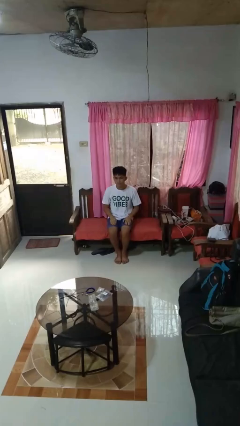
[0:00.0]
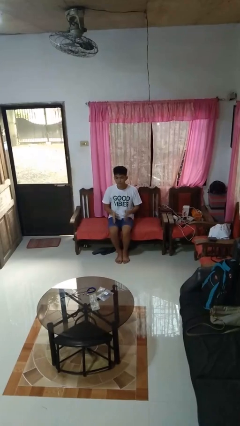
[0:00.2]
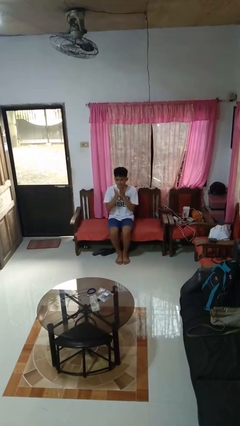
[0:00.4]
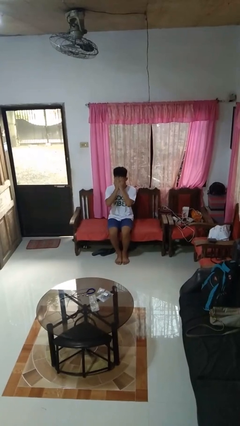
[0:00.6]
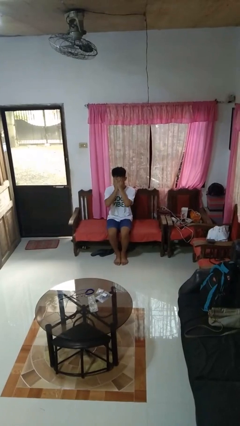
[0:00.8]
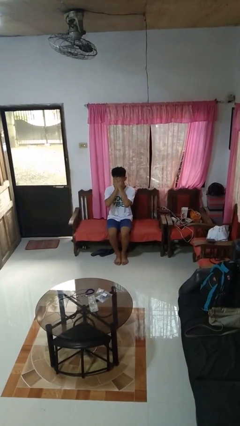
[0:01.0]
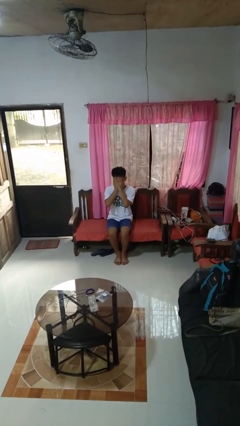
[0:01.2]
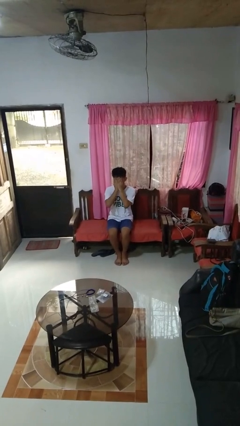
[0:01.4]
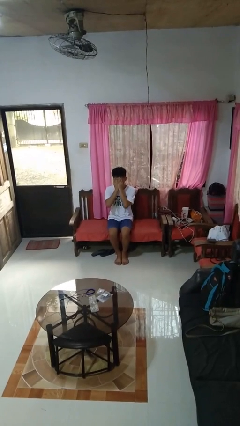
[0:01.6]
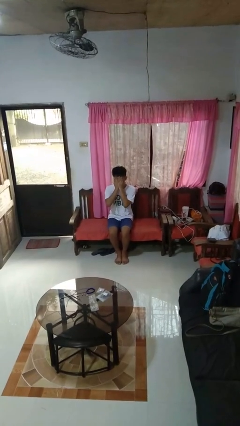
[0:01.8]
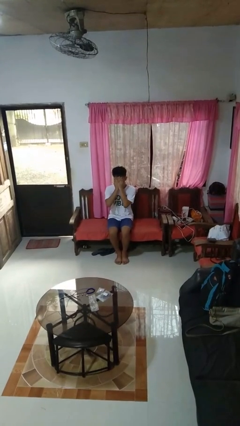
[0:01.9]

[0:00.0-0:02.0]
person covers face with hands

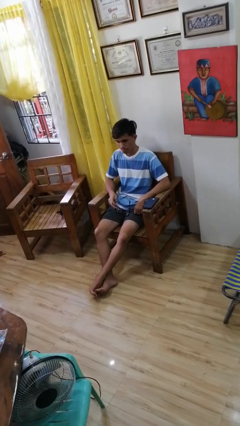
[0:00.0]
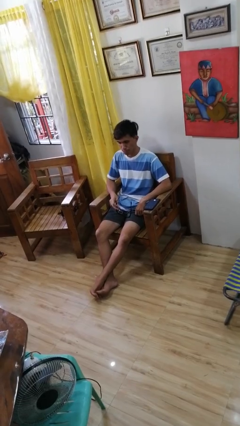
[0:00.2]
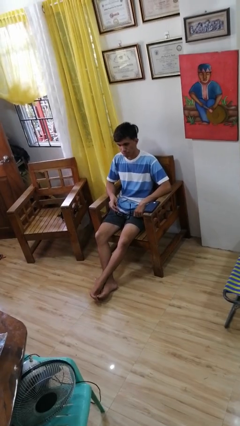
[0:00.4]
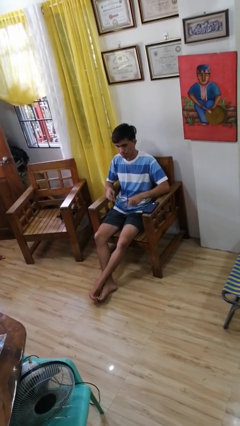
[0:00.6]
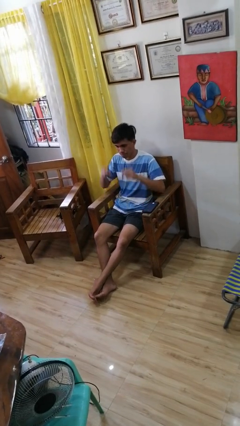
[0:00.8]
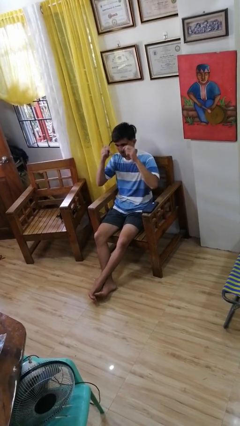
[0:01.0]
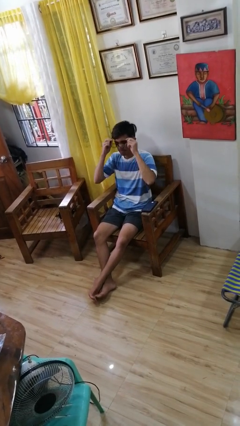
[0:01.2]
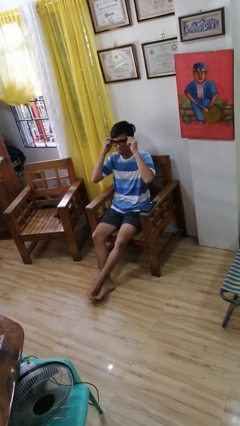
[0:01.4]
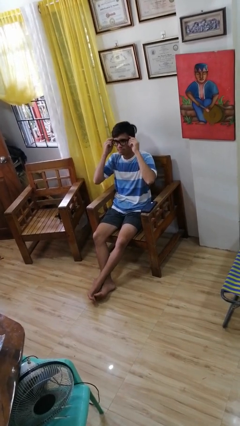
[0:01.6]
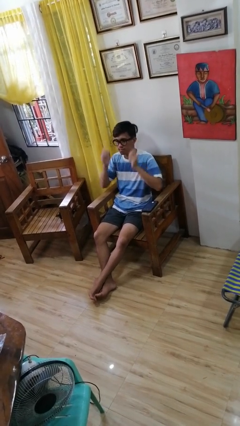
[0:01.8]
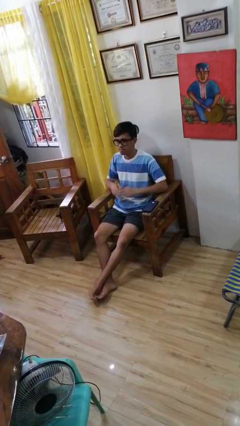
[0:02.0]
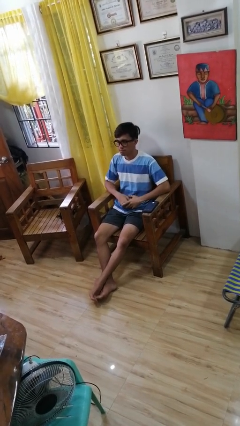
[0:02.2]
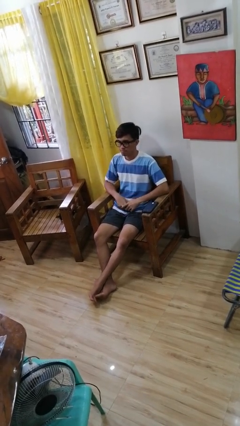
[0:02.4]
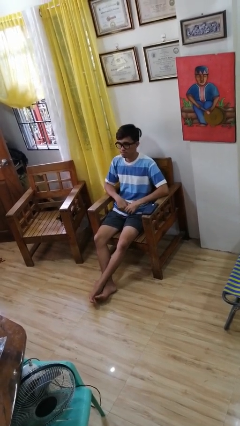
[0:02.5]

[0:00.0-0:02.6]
person puts on glasses

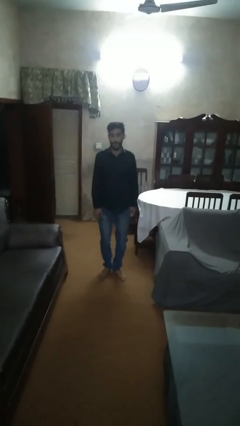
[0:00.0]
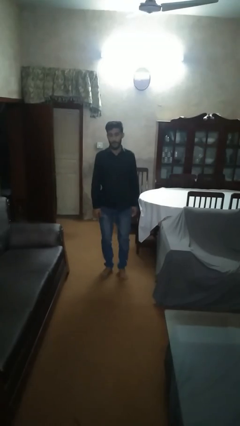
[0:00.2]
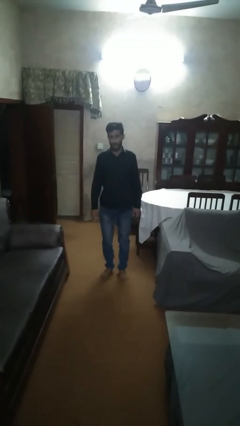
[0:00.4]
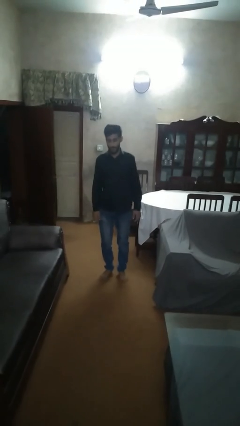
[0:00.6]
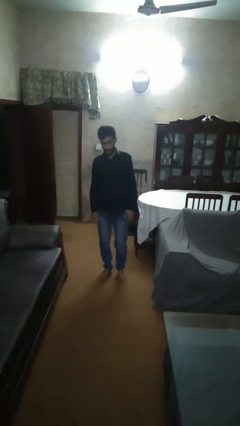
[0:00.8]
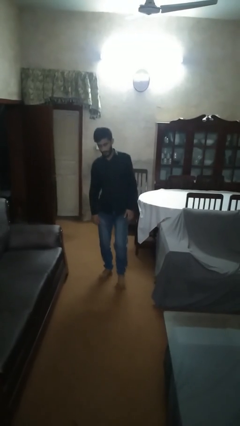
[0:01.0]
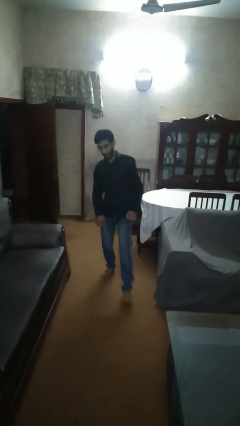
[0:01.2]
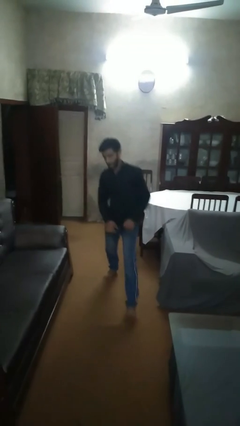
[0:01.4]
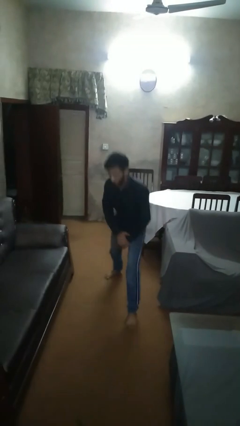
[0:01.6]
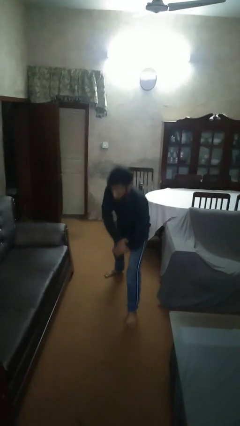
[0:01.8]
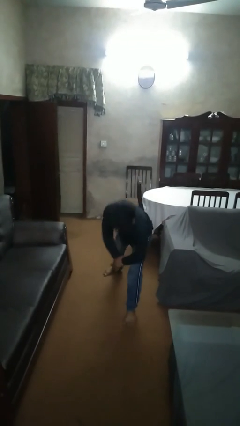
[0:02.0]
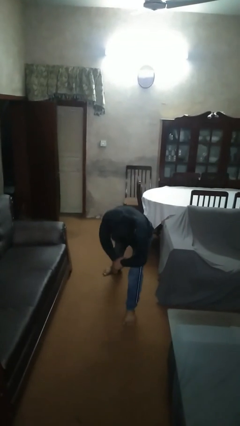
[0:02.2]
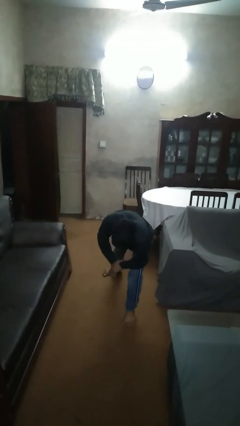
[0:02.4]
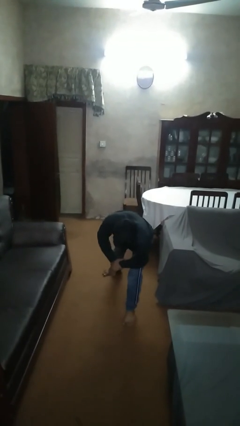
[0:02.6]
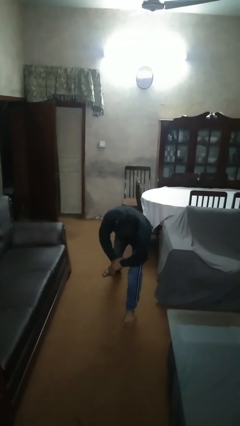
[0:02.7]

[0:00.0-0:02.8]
person exercises with lunges

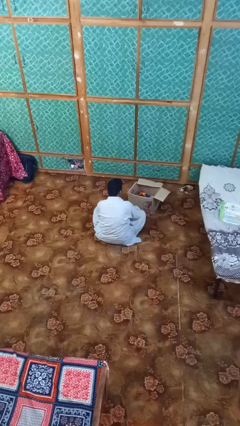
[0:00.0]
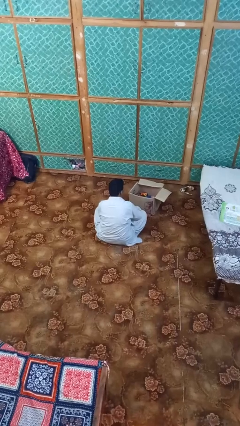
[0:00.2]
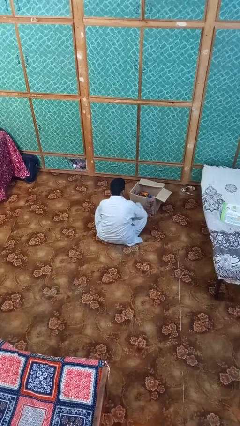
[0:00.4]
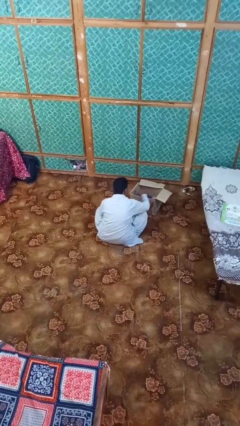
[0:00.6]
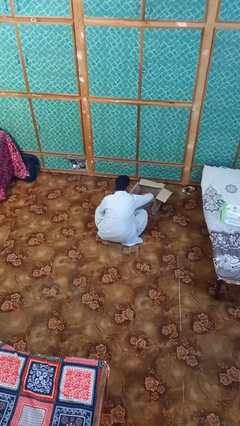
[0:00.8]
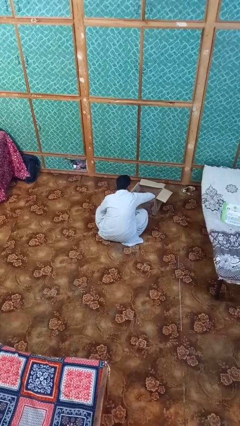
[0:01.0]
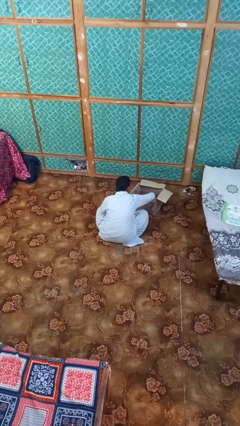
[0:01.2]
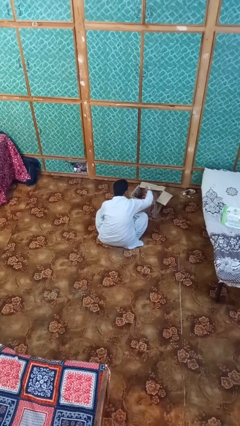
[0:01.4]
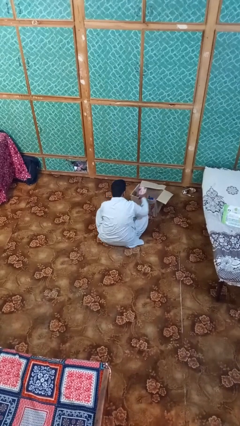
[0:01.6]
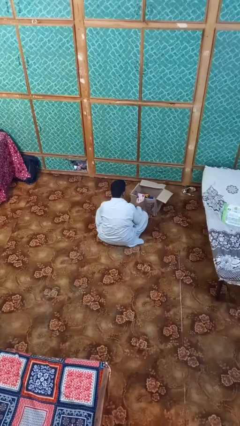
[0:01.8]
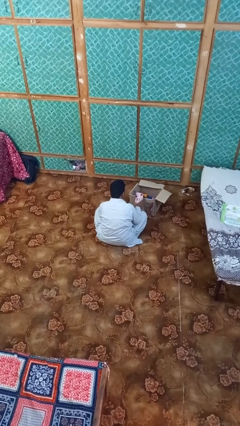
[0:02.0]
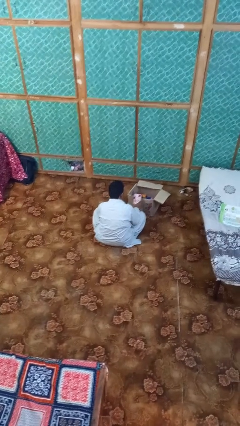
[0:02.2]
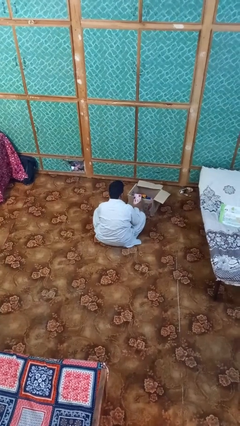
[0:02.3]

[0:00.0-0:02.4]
person takes object from box

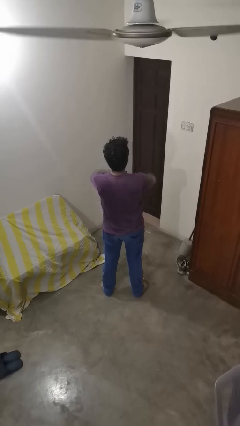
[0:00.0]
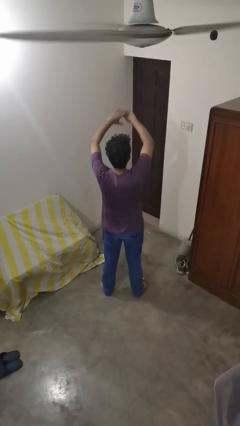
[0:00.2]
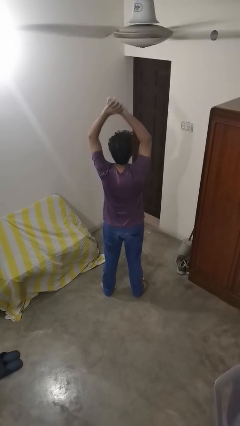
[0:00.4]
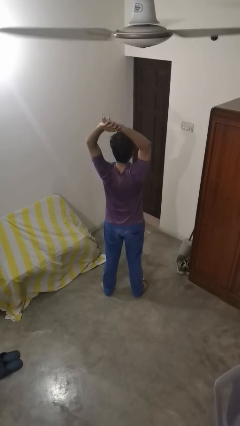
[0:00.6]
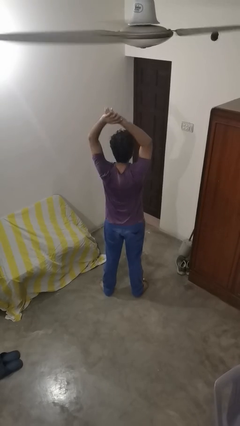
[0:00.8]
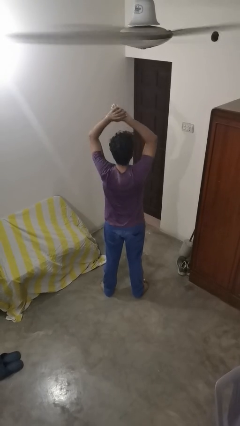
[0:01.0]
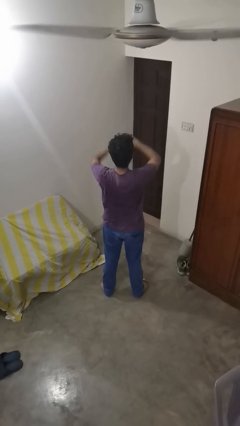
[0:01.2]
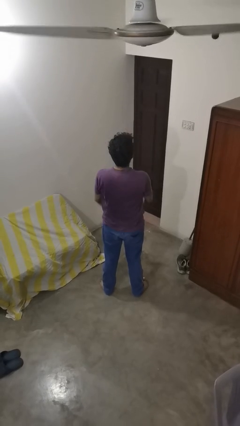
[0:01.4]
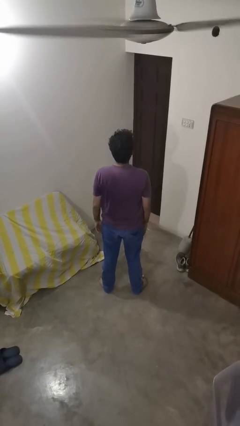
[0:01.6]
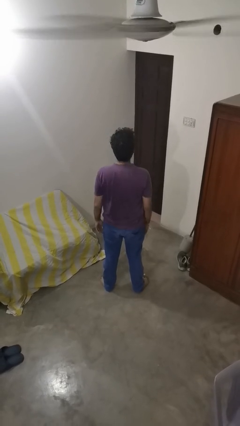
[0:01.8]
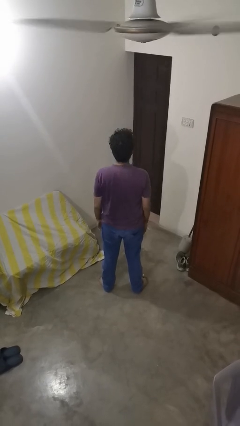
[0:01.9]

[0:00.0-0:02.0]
person stretches arms over head

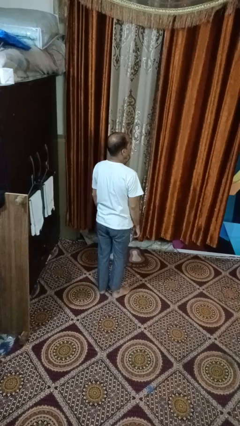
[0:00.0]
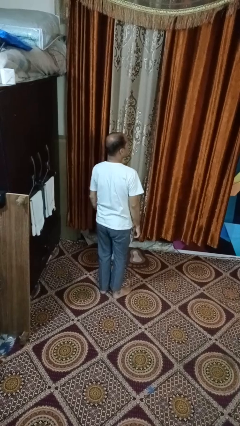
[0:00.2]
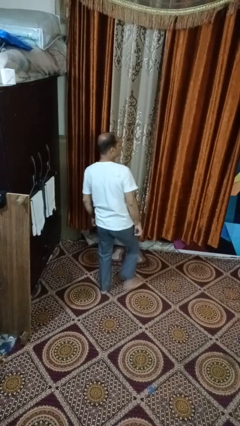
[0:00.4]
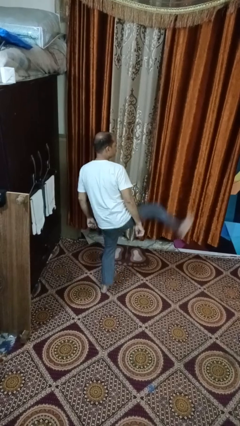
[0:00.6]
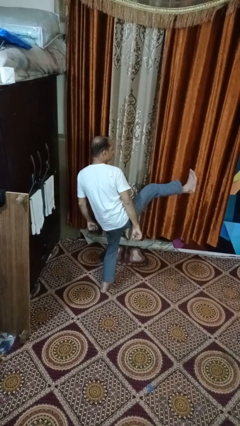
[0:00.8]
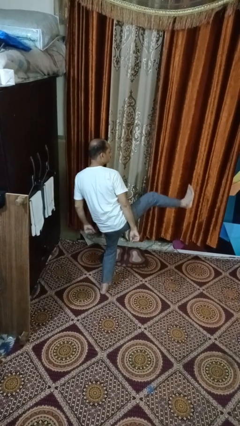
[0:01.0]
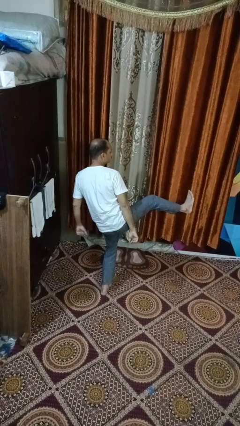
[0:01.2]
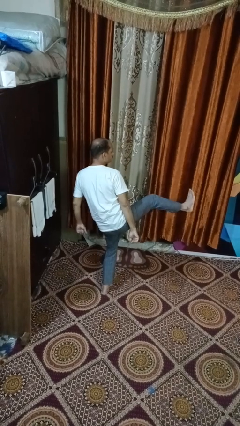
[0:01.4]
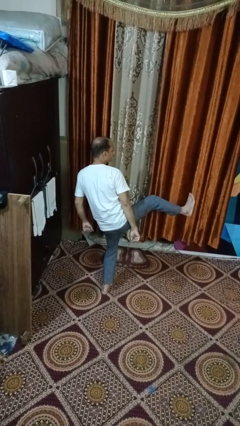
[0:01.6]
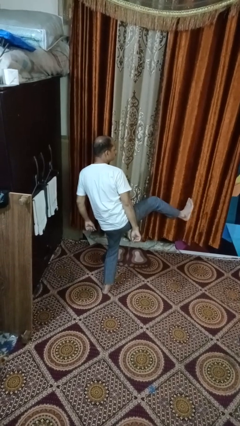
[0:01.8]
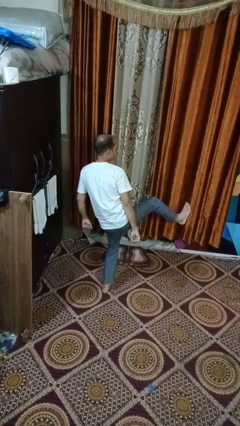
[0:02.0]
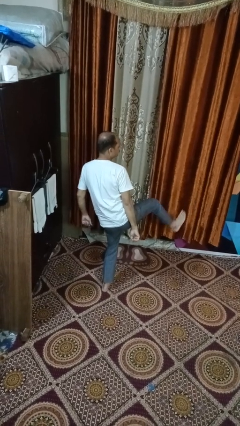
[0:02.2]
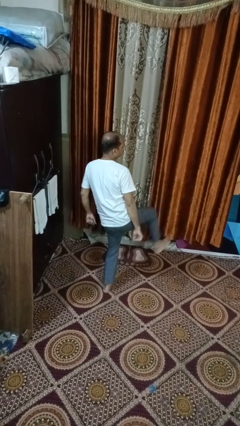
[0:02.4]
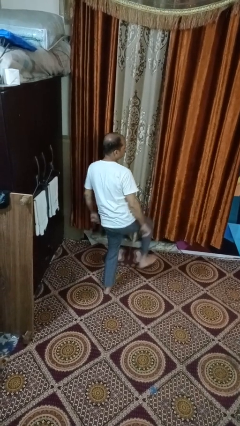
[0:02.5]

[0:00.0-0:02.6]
person karate kicks

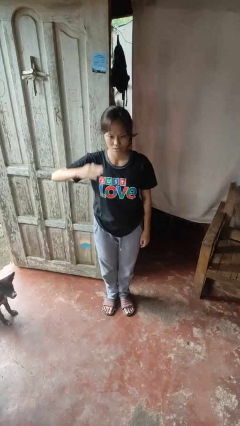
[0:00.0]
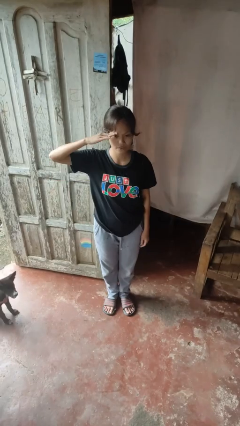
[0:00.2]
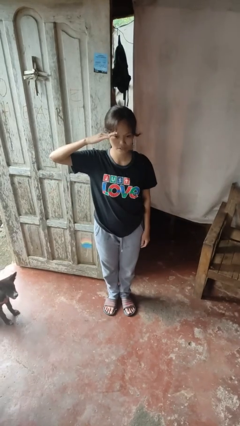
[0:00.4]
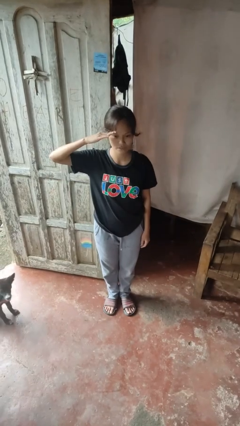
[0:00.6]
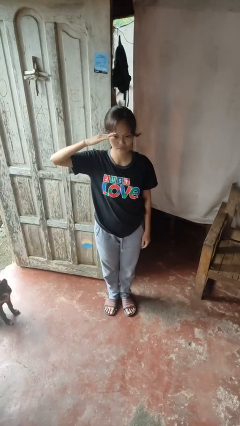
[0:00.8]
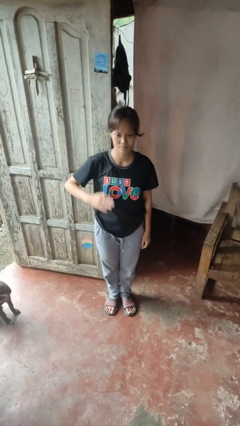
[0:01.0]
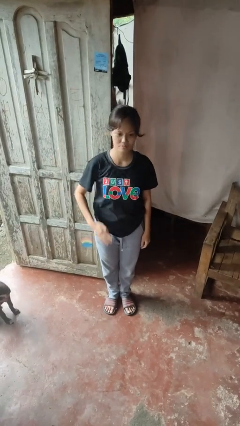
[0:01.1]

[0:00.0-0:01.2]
person salutes

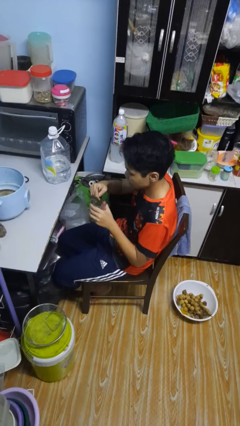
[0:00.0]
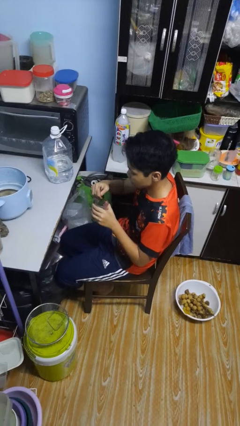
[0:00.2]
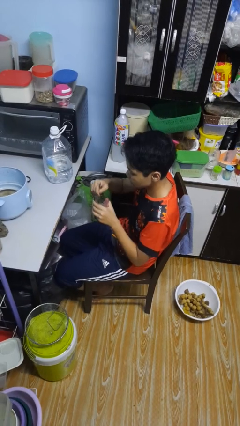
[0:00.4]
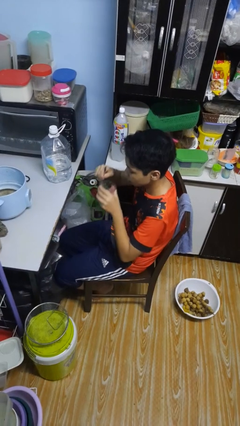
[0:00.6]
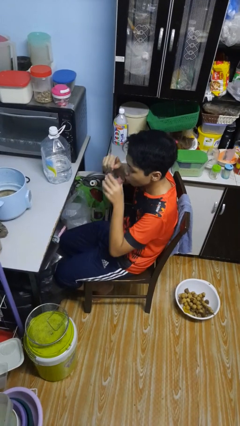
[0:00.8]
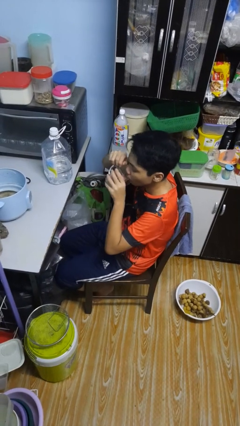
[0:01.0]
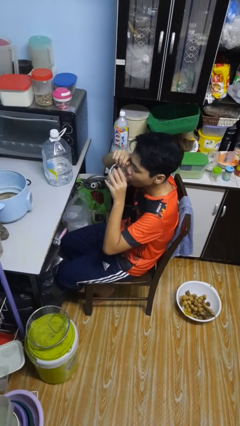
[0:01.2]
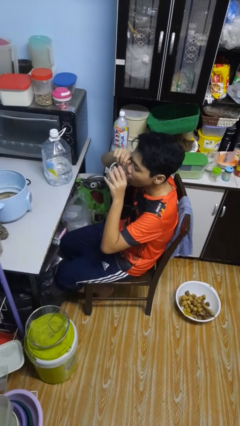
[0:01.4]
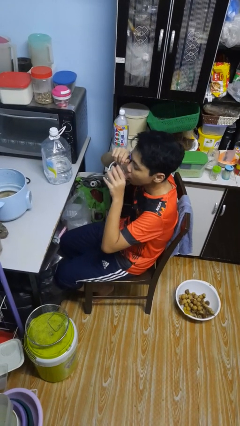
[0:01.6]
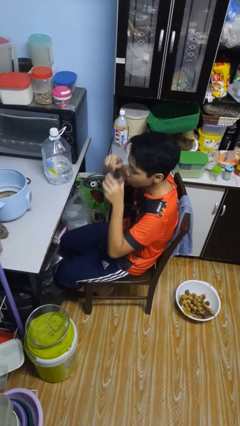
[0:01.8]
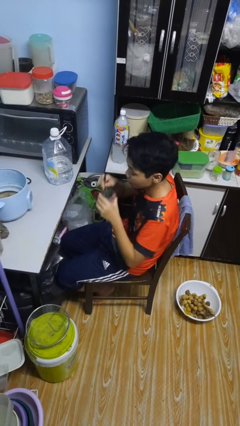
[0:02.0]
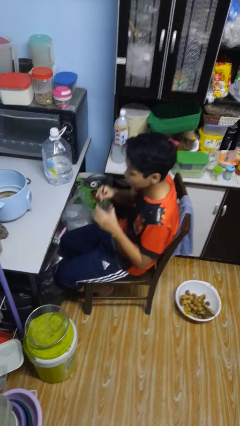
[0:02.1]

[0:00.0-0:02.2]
person drinks from mug
